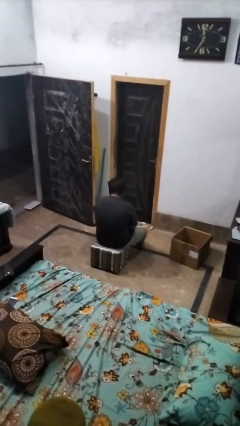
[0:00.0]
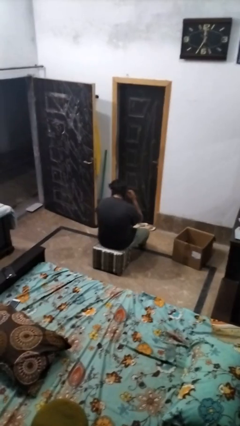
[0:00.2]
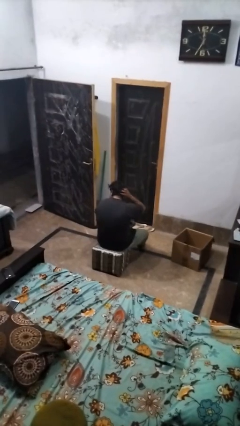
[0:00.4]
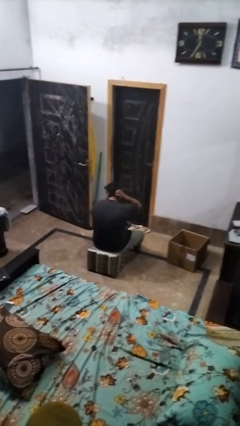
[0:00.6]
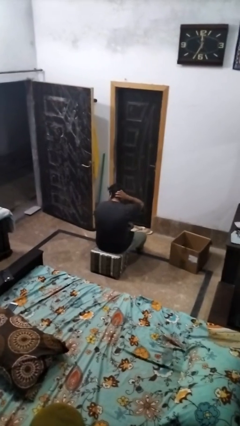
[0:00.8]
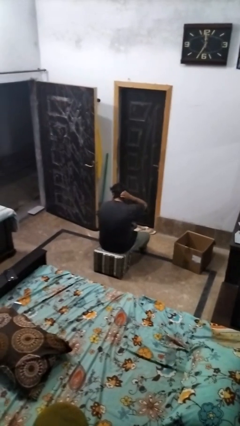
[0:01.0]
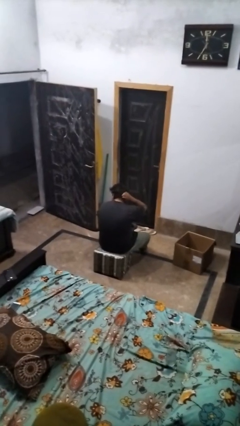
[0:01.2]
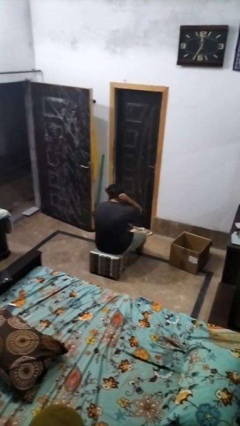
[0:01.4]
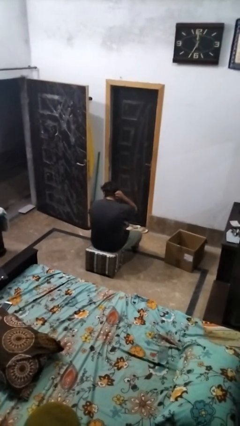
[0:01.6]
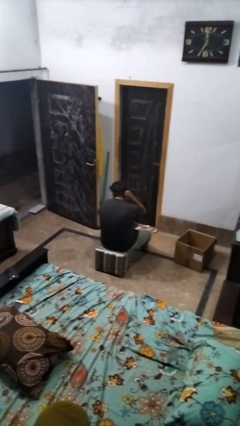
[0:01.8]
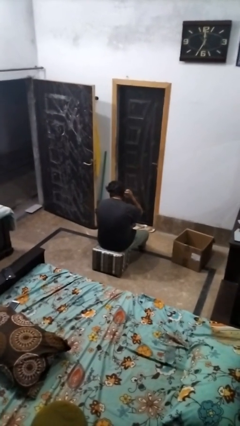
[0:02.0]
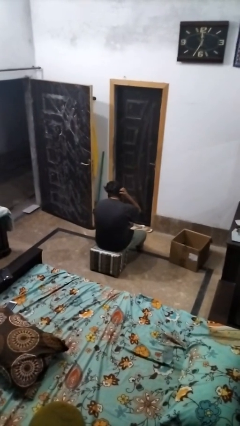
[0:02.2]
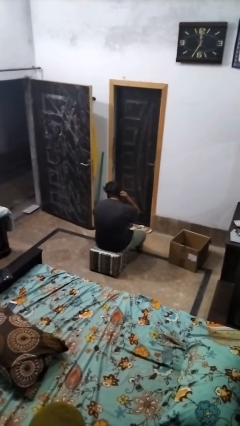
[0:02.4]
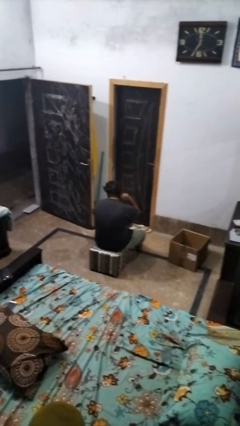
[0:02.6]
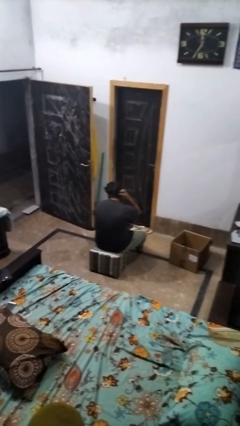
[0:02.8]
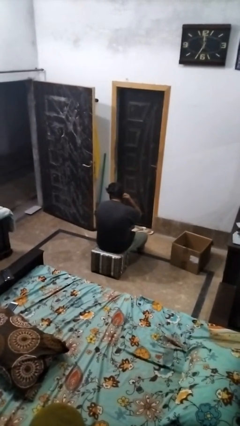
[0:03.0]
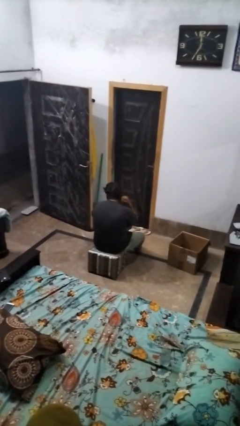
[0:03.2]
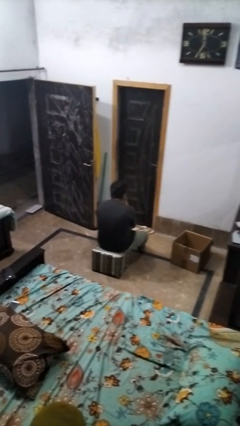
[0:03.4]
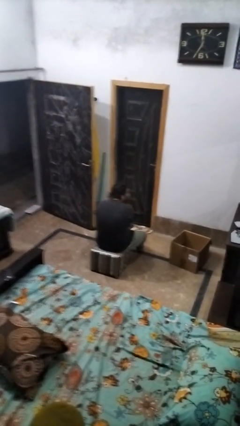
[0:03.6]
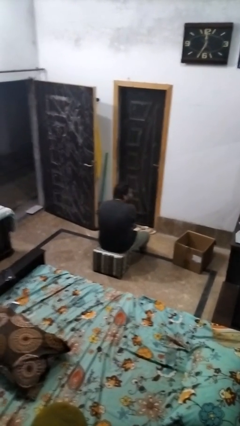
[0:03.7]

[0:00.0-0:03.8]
person strokes hair

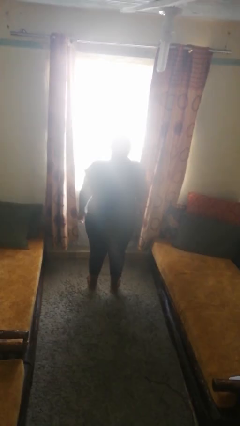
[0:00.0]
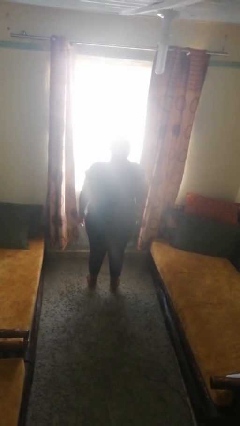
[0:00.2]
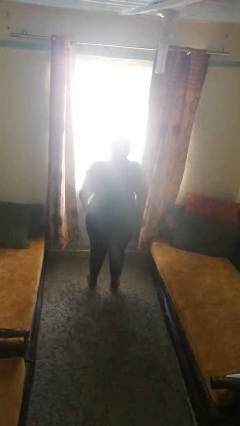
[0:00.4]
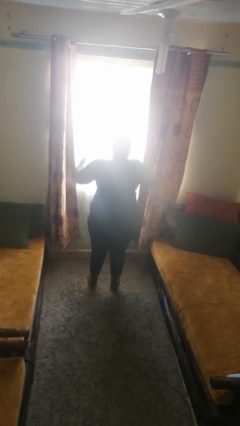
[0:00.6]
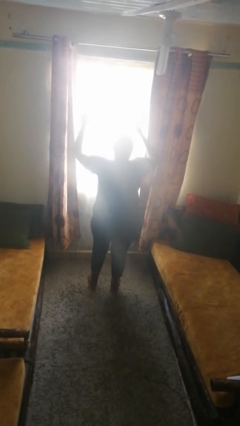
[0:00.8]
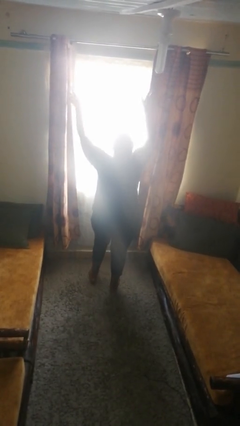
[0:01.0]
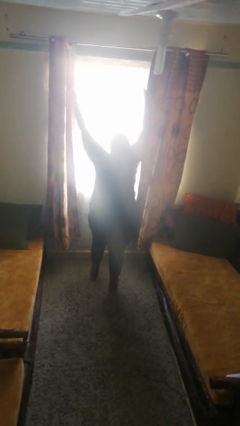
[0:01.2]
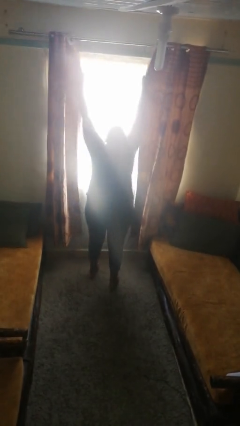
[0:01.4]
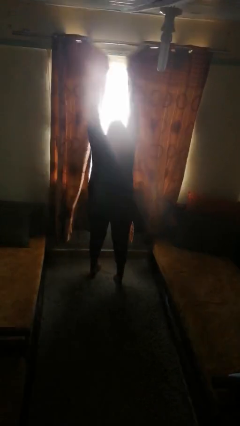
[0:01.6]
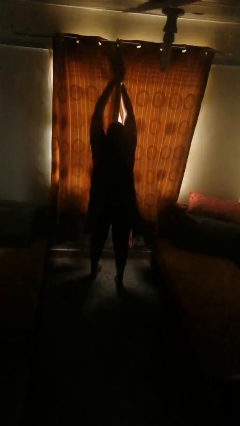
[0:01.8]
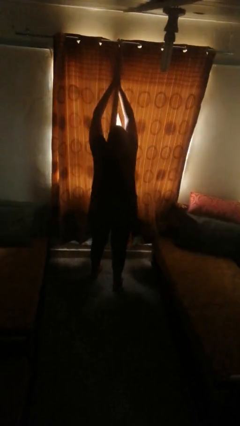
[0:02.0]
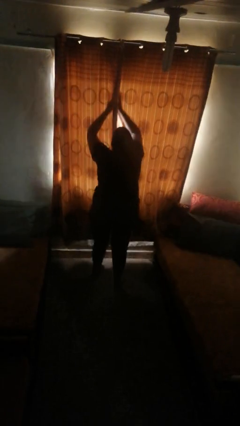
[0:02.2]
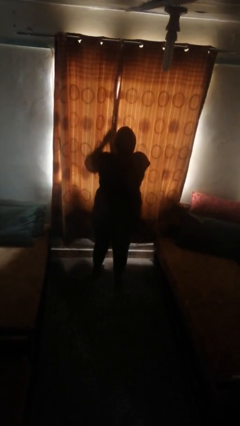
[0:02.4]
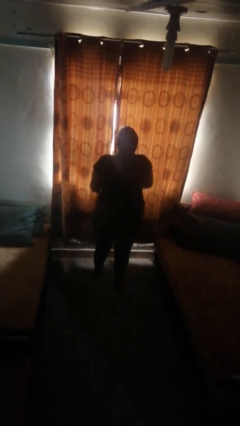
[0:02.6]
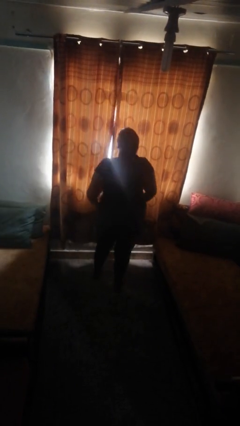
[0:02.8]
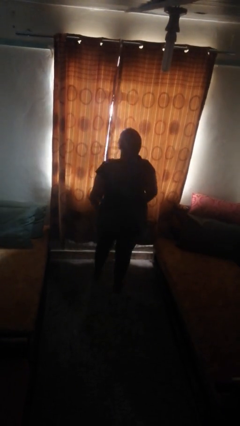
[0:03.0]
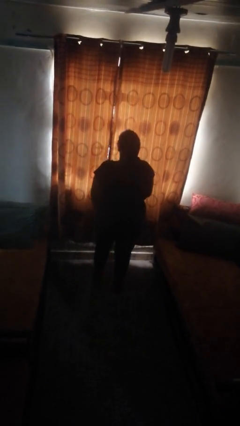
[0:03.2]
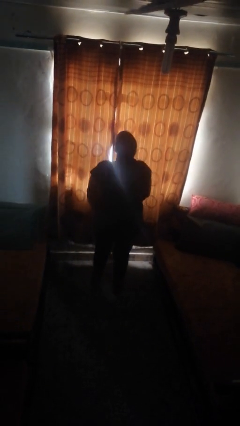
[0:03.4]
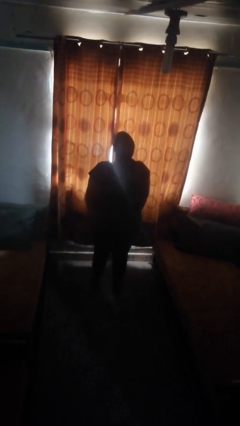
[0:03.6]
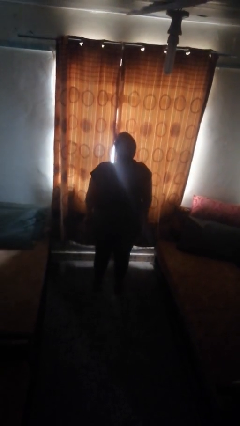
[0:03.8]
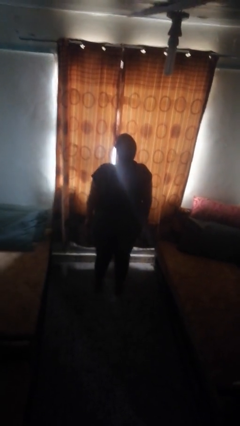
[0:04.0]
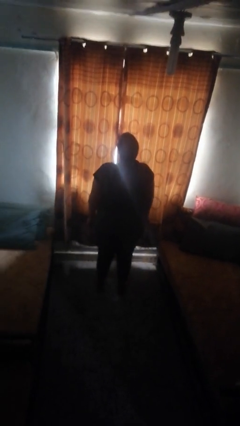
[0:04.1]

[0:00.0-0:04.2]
person closes curtains

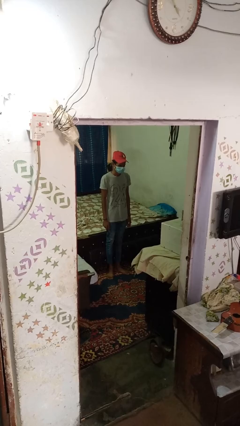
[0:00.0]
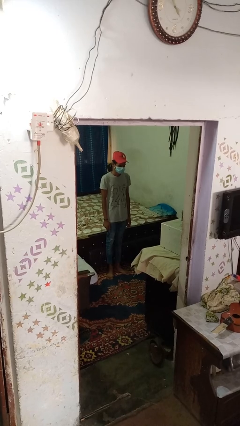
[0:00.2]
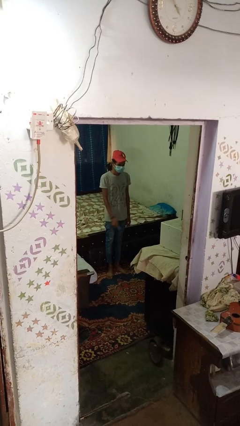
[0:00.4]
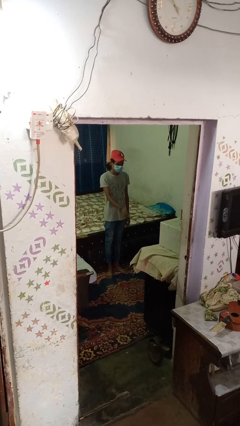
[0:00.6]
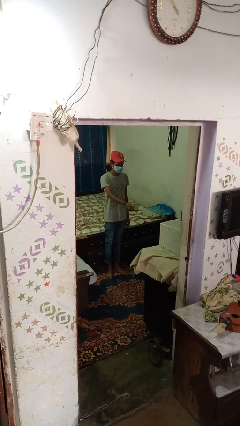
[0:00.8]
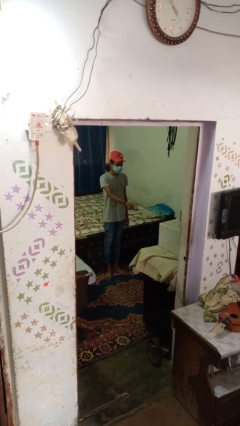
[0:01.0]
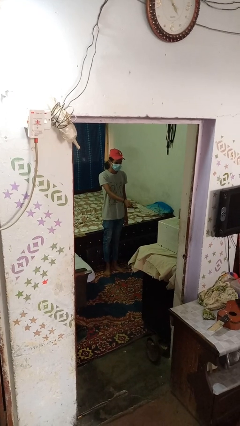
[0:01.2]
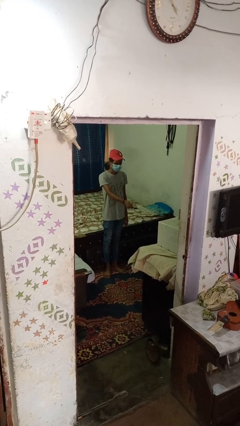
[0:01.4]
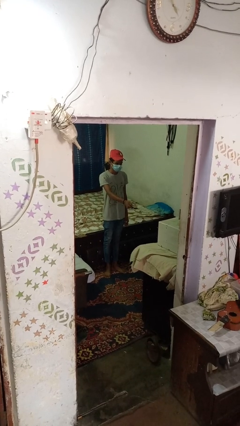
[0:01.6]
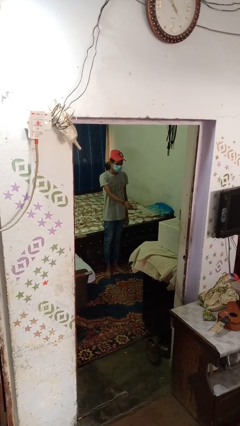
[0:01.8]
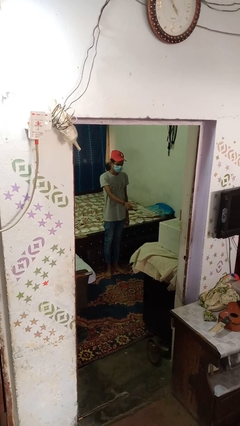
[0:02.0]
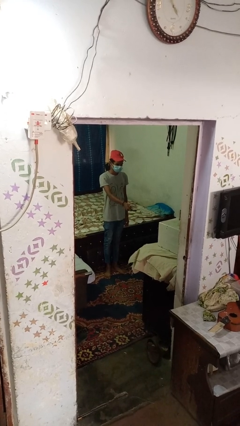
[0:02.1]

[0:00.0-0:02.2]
person uses television remote

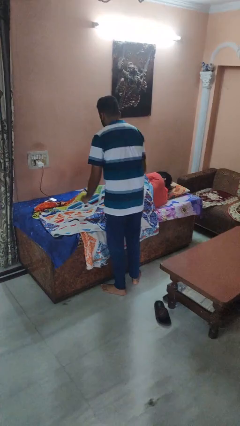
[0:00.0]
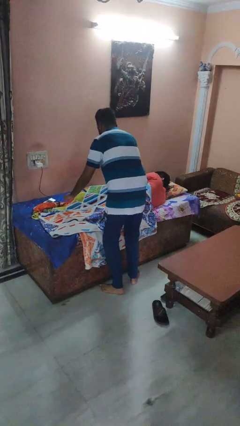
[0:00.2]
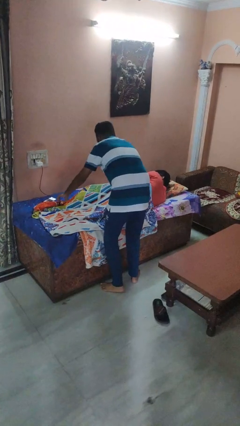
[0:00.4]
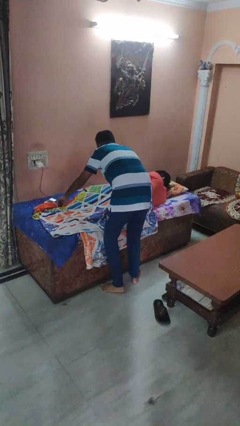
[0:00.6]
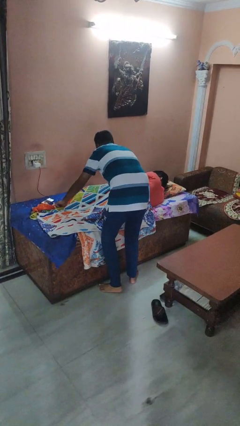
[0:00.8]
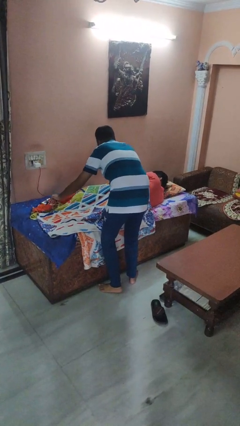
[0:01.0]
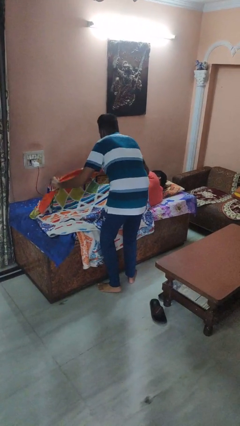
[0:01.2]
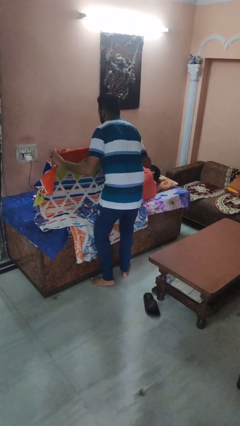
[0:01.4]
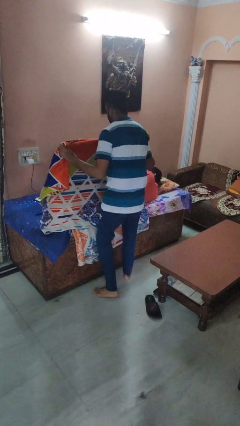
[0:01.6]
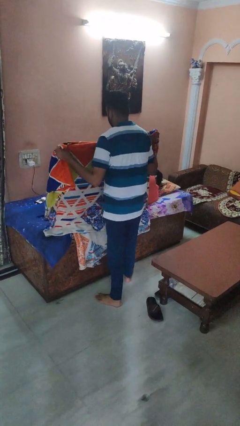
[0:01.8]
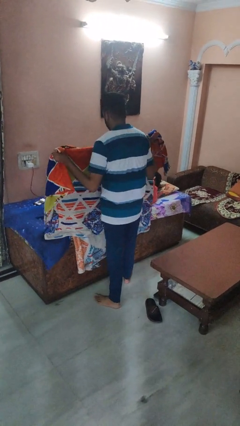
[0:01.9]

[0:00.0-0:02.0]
person uncovers friend with blanket

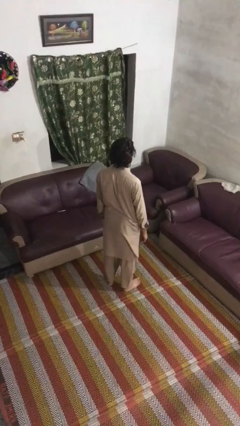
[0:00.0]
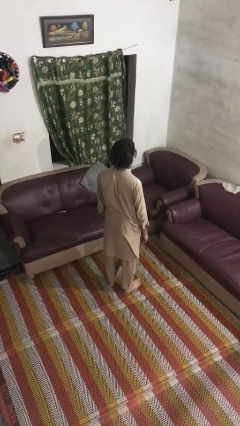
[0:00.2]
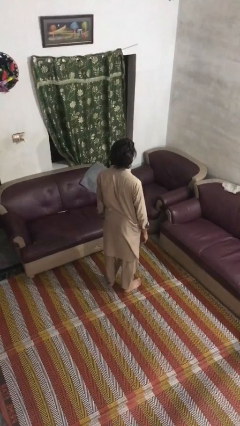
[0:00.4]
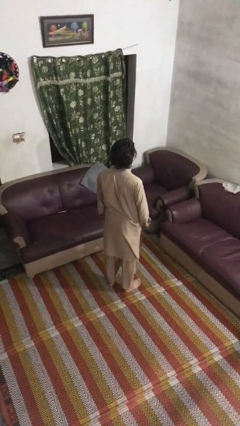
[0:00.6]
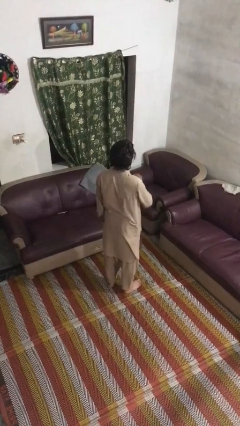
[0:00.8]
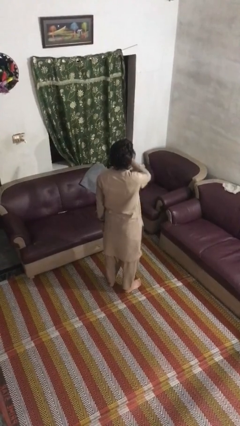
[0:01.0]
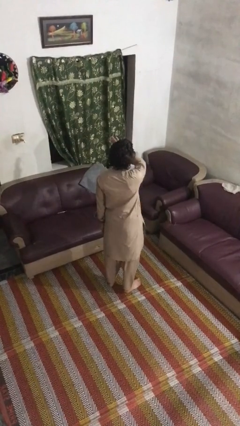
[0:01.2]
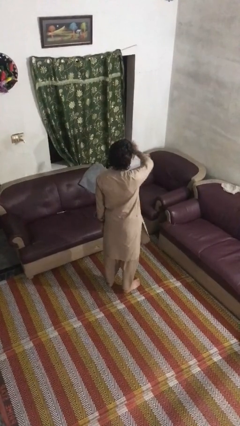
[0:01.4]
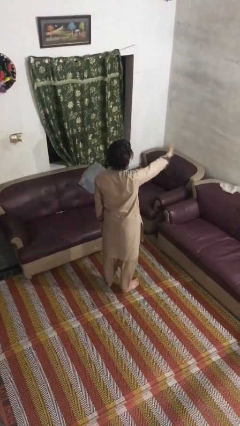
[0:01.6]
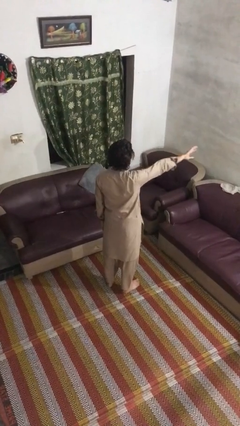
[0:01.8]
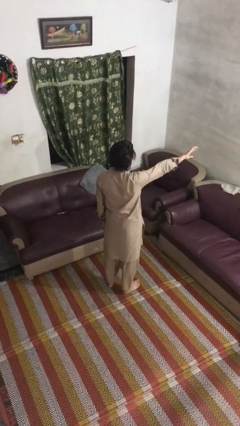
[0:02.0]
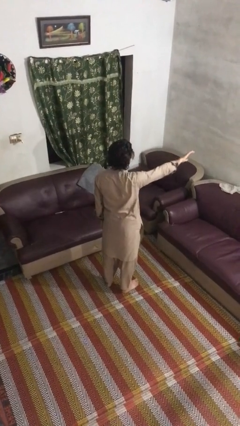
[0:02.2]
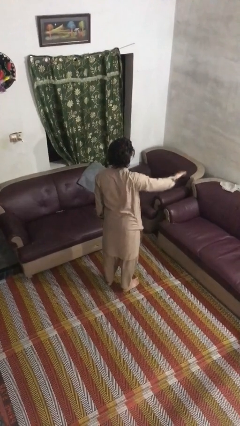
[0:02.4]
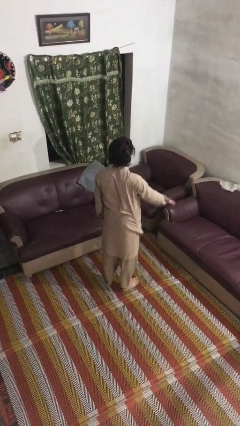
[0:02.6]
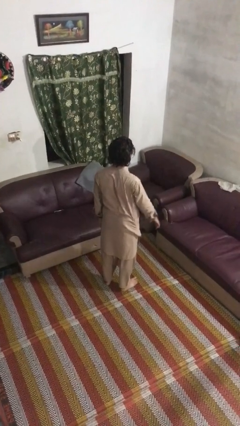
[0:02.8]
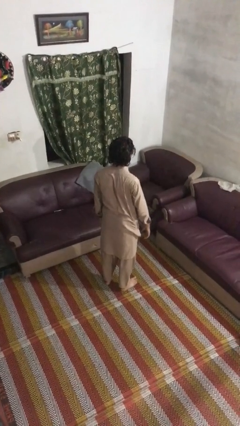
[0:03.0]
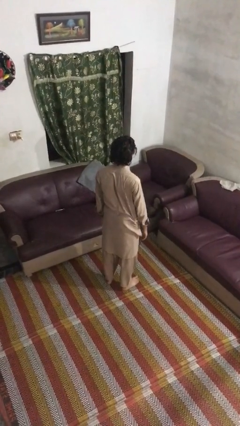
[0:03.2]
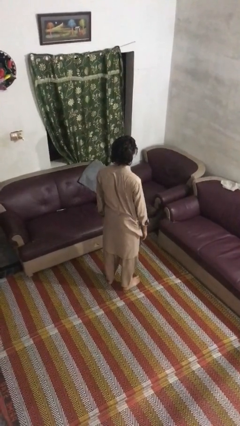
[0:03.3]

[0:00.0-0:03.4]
person gestures swipe right

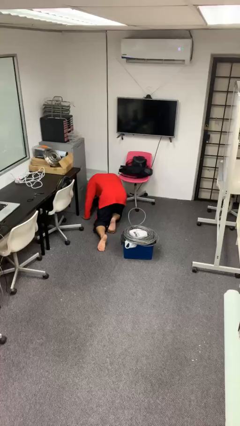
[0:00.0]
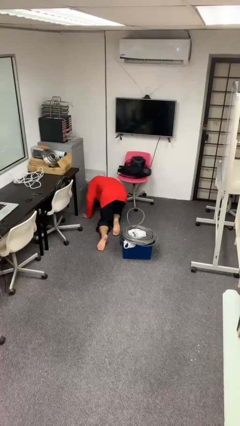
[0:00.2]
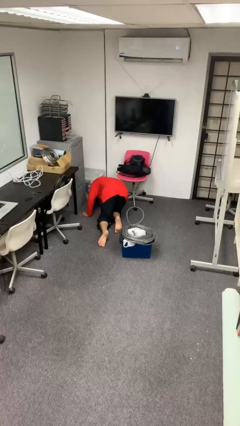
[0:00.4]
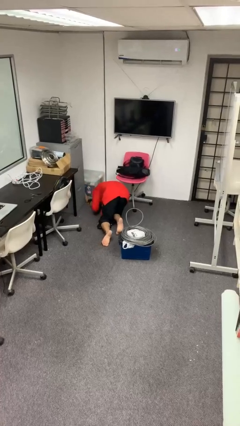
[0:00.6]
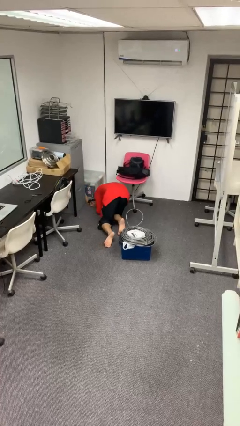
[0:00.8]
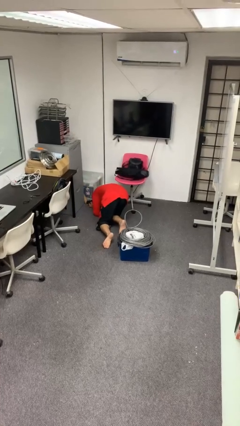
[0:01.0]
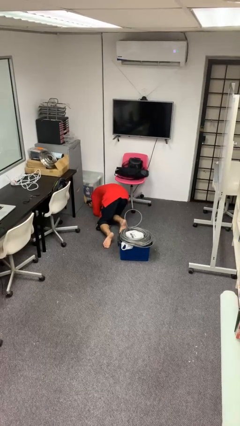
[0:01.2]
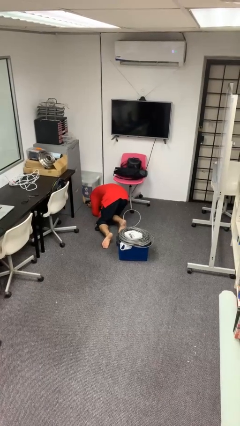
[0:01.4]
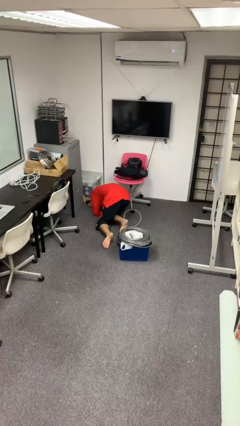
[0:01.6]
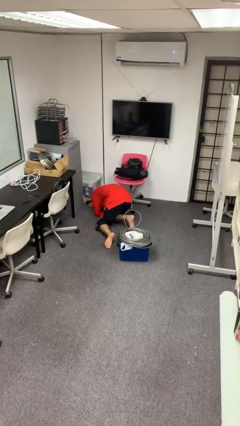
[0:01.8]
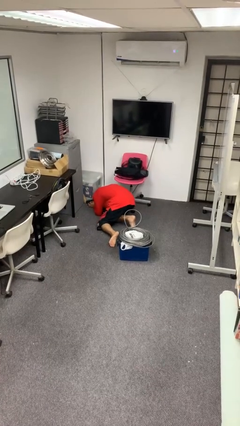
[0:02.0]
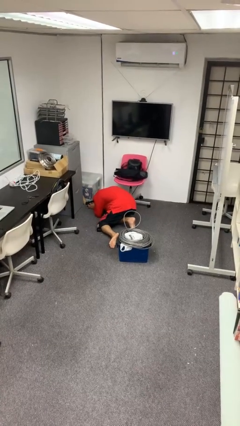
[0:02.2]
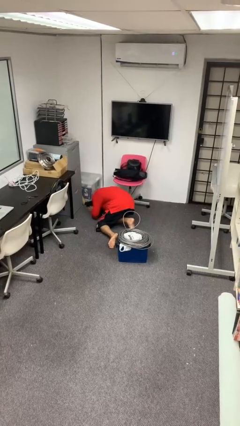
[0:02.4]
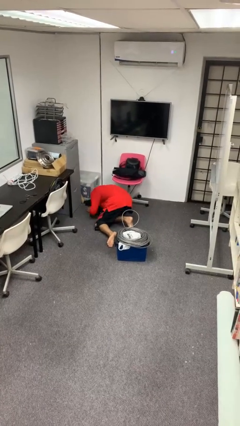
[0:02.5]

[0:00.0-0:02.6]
person lies down on floor
